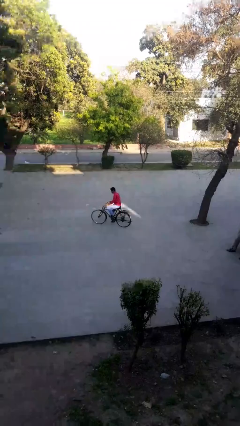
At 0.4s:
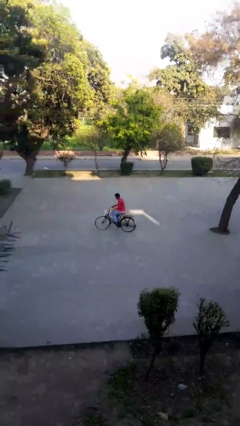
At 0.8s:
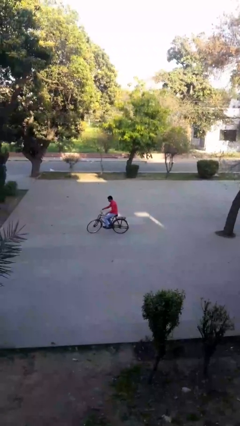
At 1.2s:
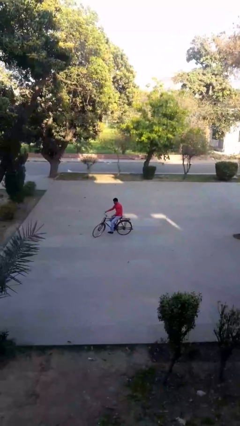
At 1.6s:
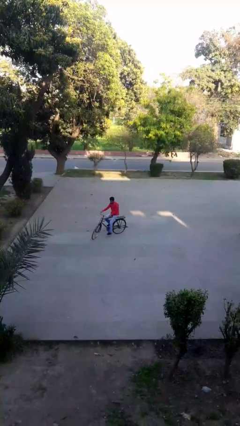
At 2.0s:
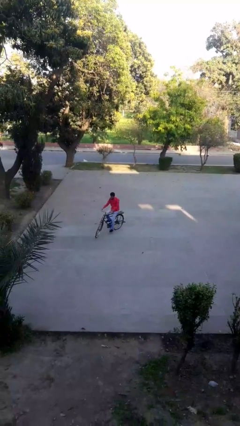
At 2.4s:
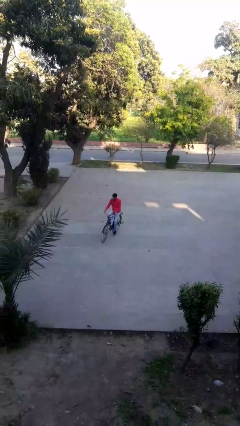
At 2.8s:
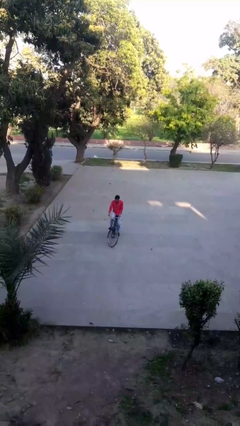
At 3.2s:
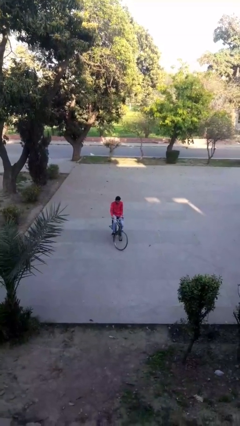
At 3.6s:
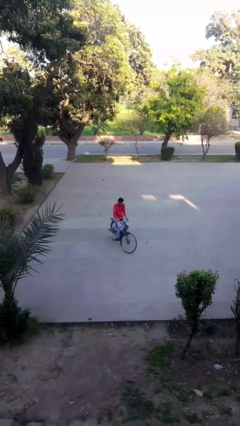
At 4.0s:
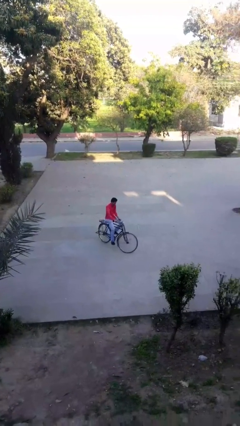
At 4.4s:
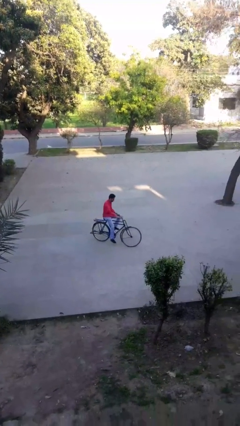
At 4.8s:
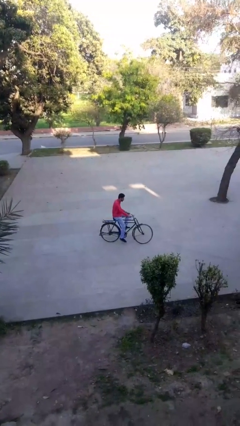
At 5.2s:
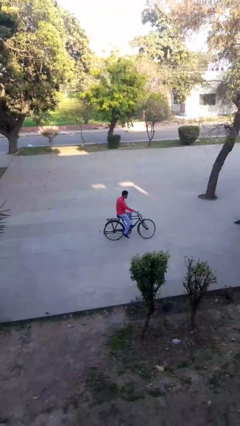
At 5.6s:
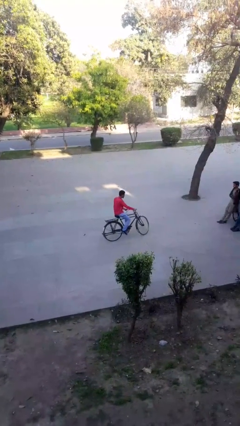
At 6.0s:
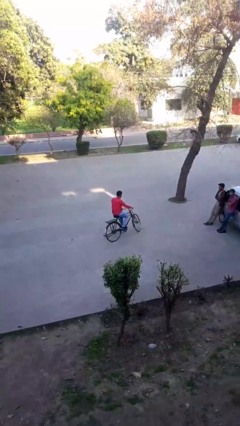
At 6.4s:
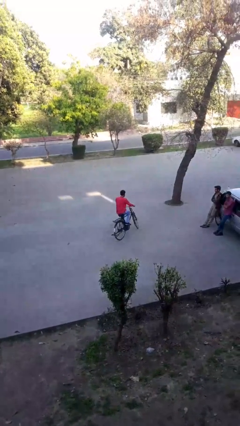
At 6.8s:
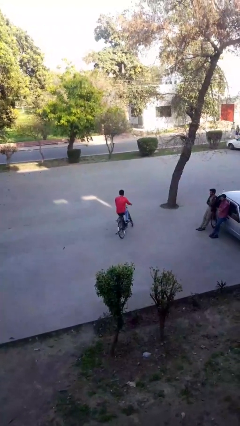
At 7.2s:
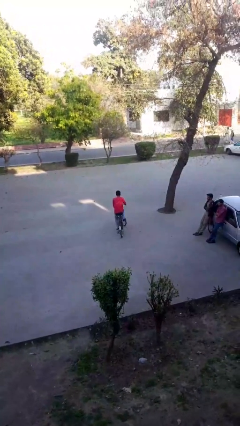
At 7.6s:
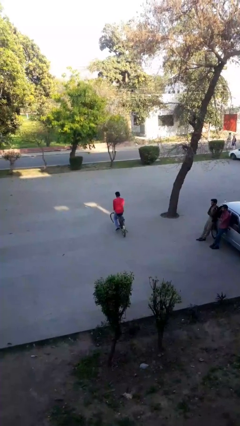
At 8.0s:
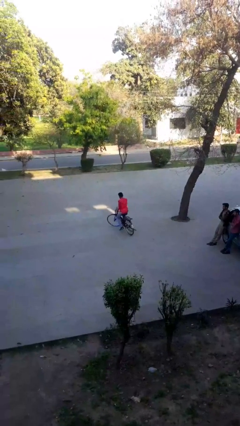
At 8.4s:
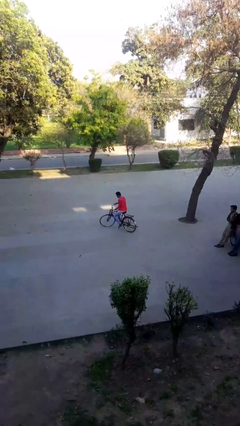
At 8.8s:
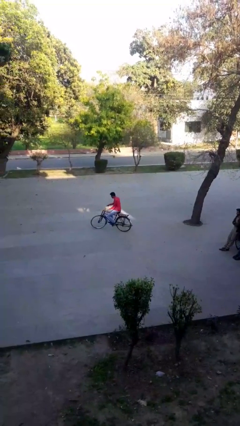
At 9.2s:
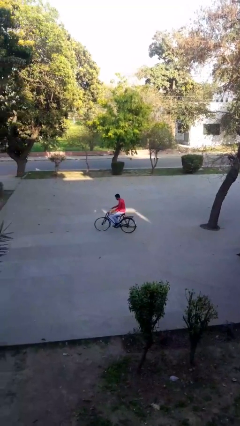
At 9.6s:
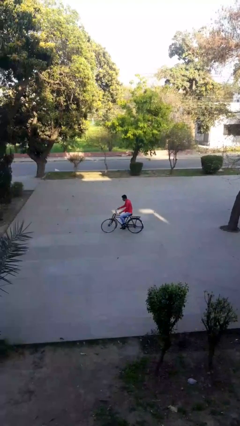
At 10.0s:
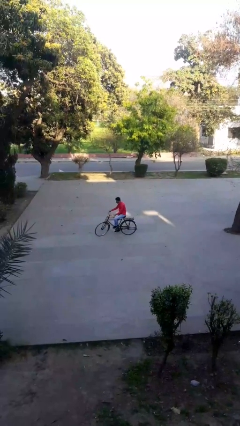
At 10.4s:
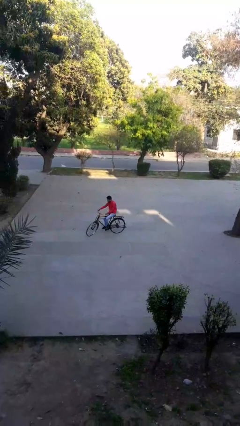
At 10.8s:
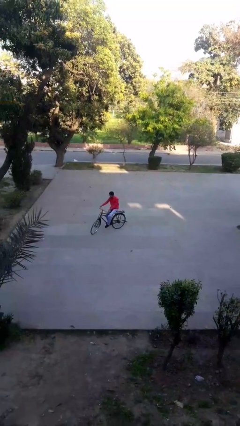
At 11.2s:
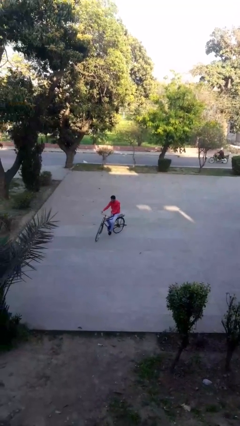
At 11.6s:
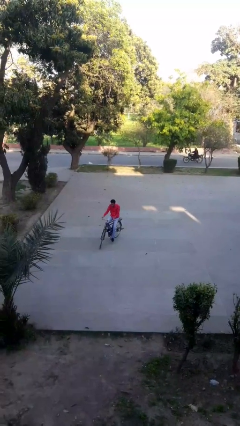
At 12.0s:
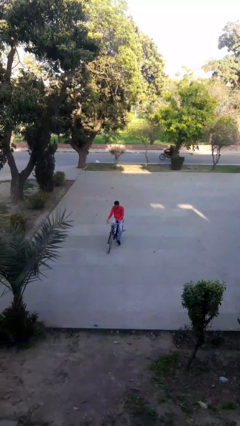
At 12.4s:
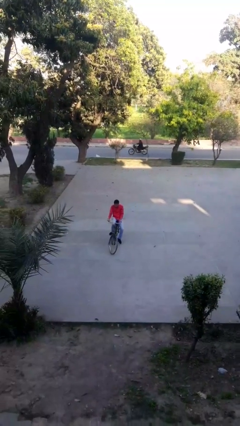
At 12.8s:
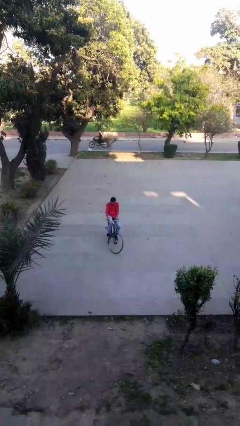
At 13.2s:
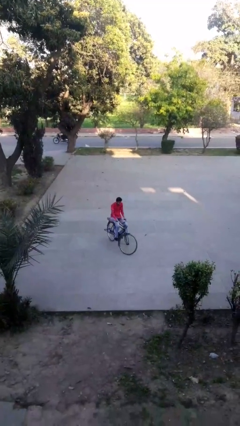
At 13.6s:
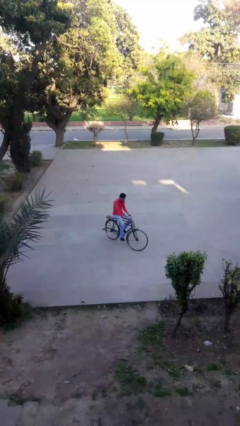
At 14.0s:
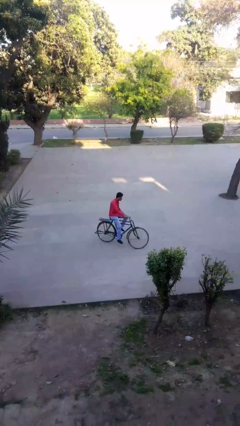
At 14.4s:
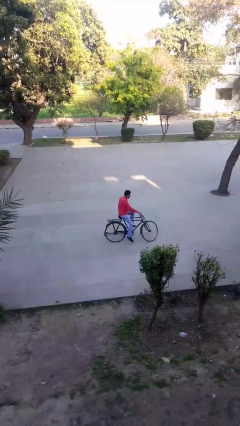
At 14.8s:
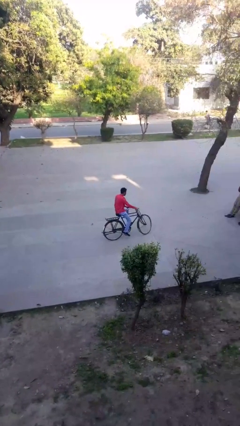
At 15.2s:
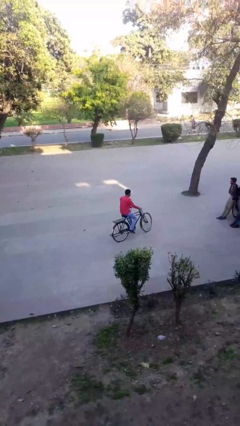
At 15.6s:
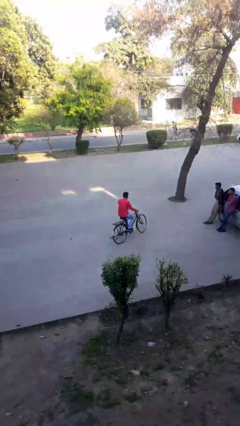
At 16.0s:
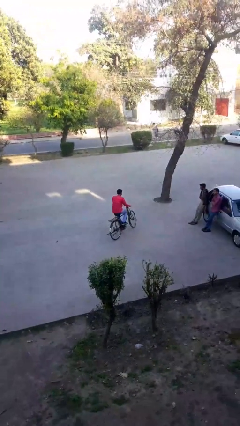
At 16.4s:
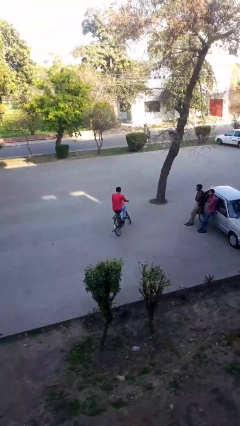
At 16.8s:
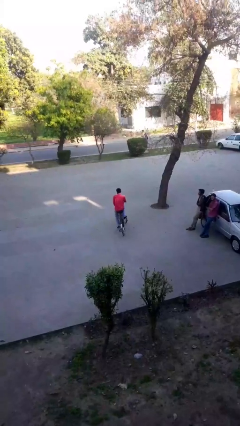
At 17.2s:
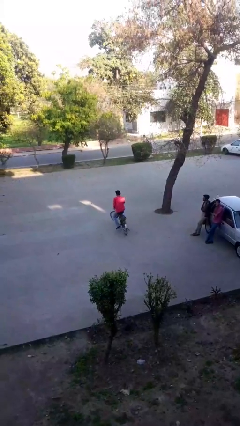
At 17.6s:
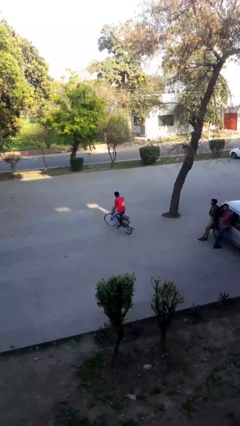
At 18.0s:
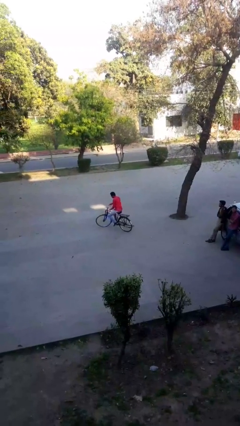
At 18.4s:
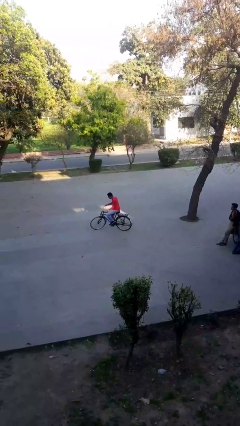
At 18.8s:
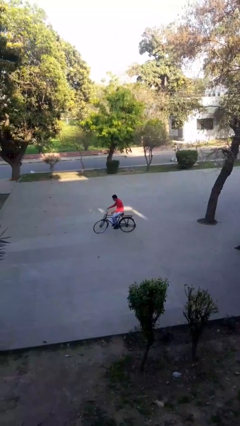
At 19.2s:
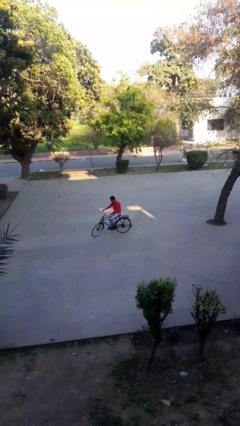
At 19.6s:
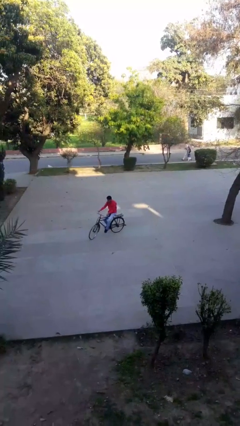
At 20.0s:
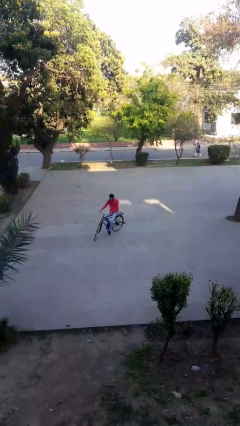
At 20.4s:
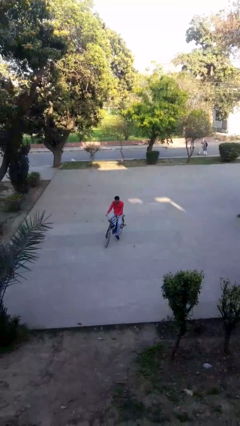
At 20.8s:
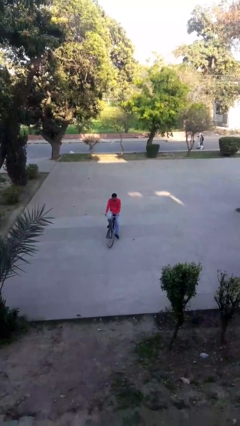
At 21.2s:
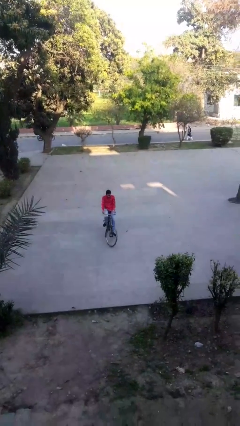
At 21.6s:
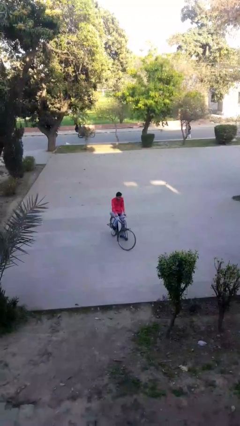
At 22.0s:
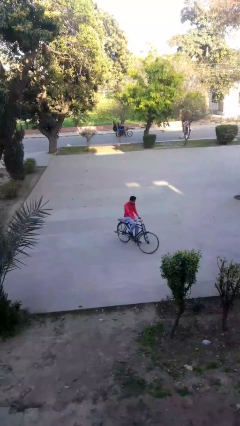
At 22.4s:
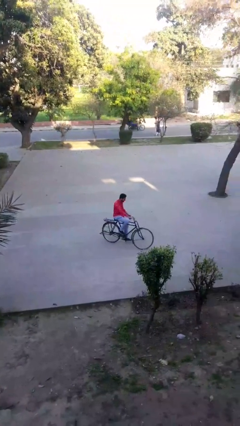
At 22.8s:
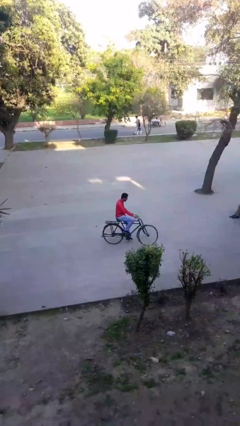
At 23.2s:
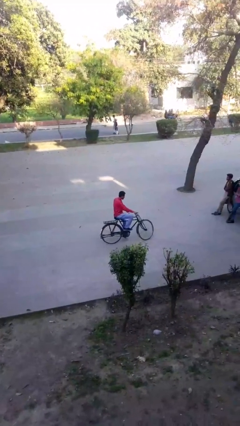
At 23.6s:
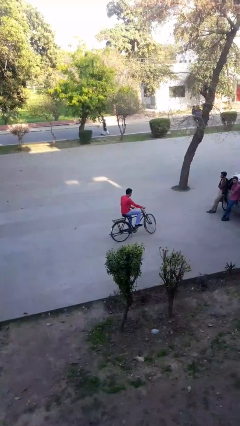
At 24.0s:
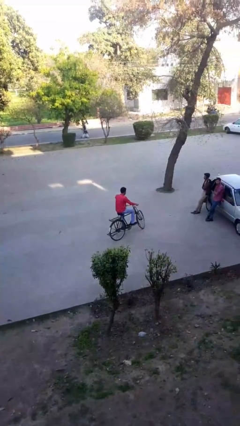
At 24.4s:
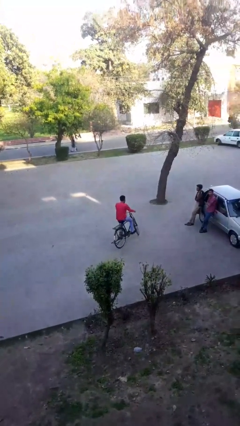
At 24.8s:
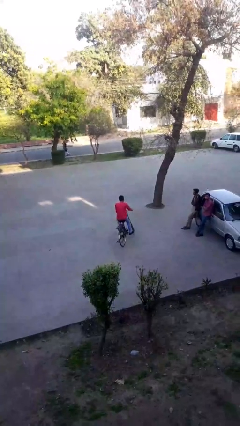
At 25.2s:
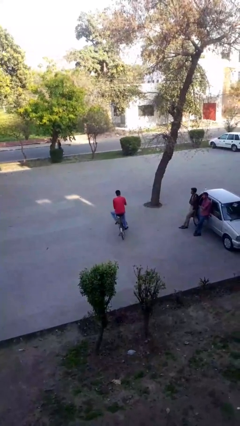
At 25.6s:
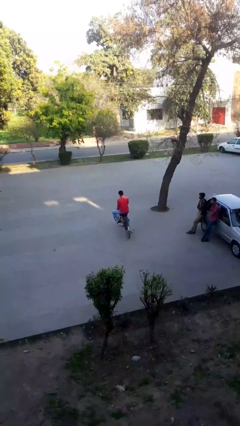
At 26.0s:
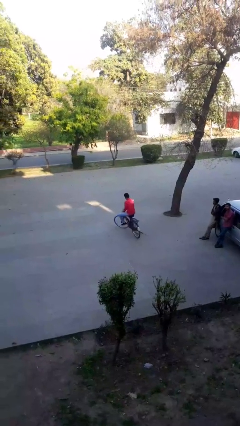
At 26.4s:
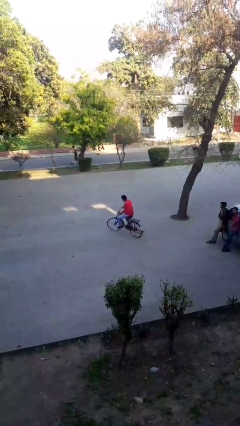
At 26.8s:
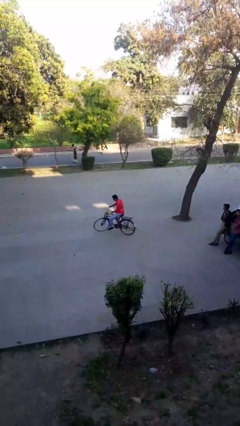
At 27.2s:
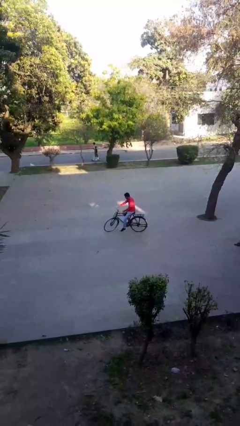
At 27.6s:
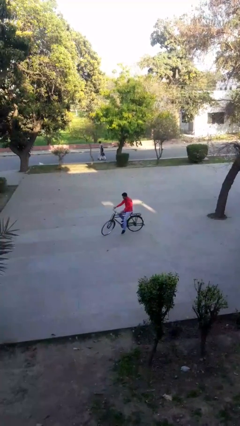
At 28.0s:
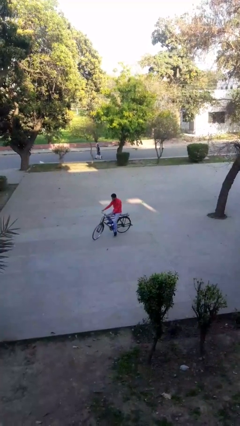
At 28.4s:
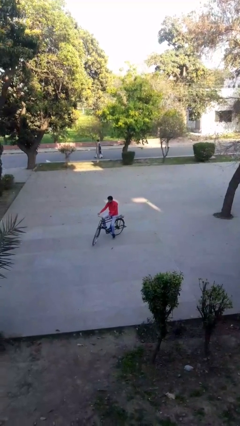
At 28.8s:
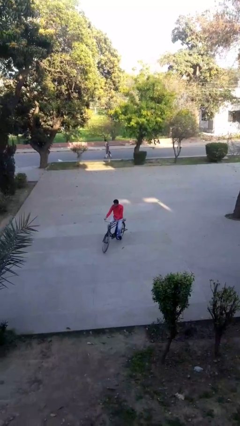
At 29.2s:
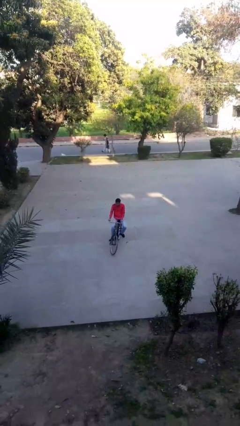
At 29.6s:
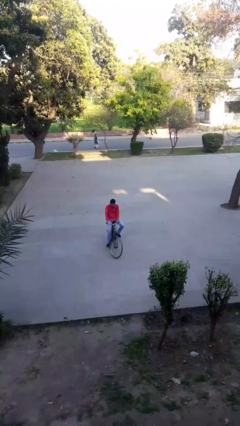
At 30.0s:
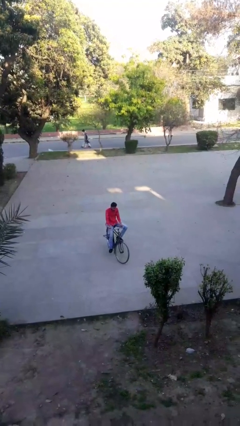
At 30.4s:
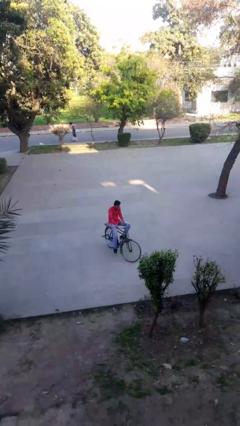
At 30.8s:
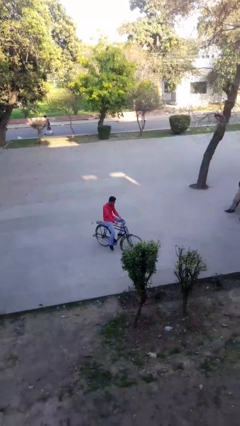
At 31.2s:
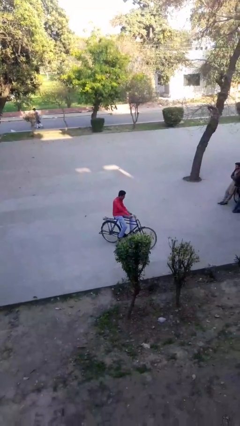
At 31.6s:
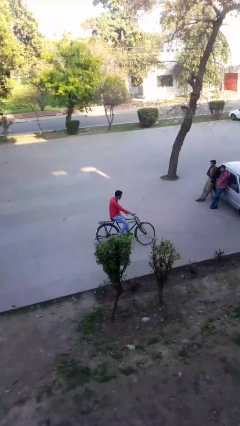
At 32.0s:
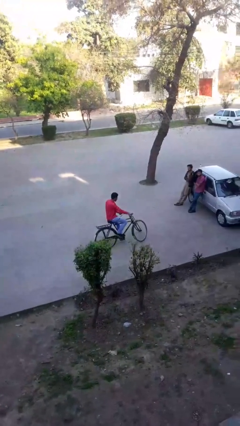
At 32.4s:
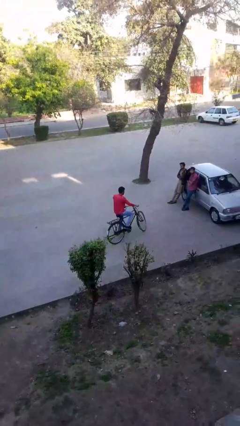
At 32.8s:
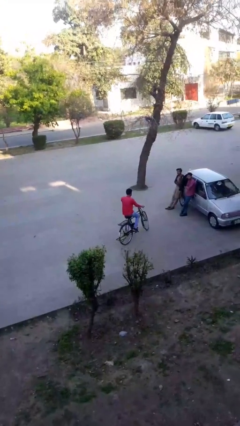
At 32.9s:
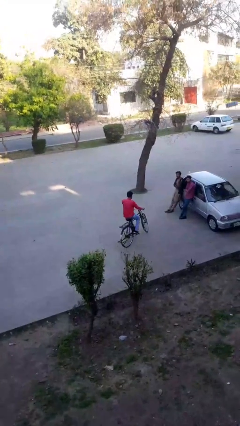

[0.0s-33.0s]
person rides bicycle

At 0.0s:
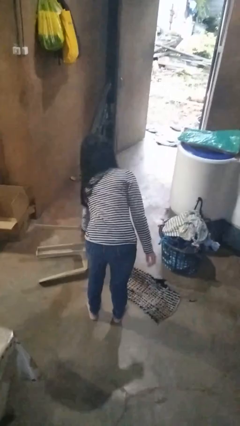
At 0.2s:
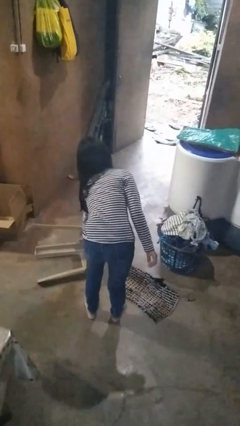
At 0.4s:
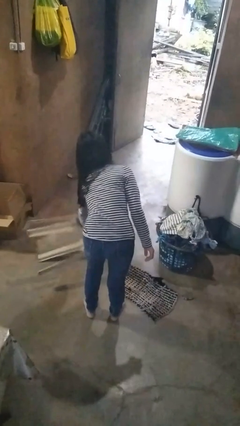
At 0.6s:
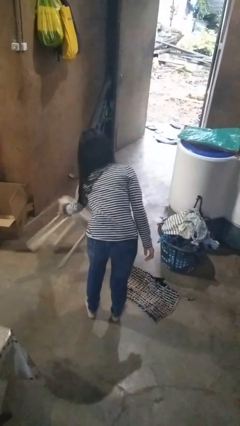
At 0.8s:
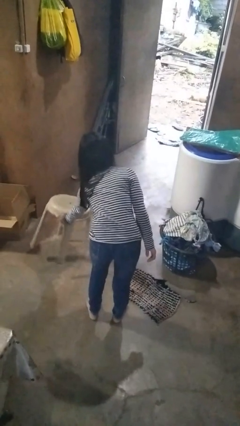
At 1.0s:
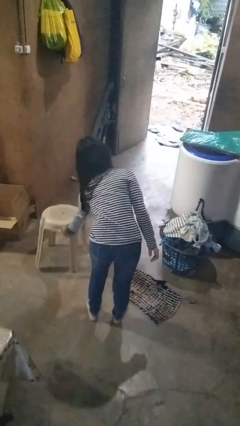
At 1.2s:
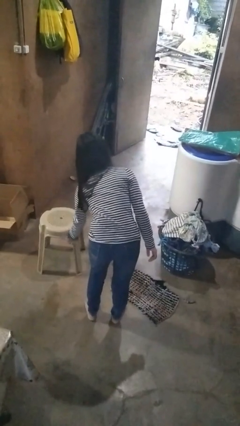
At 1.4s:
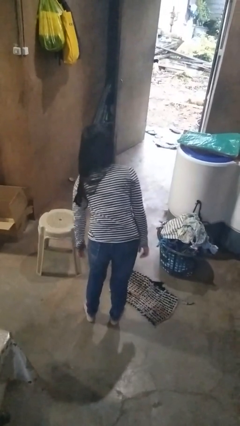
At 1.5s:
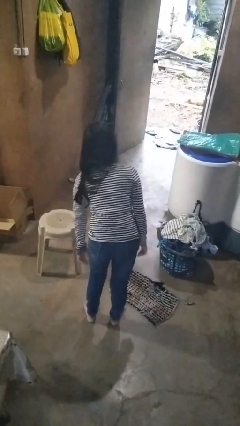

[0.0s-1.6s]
person sets upright furniture
